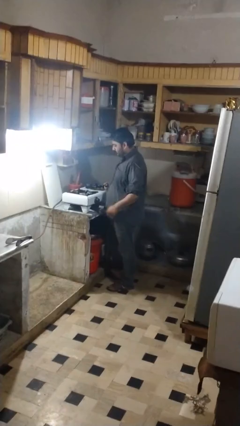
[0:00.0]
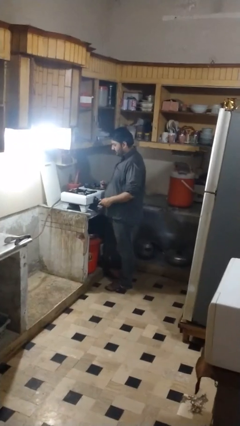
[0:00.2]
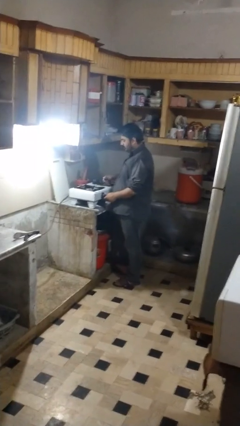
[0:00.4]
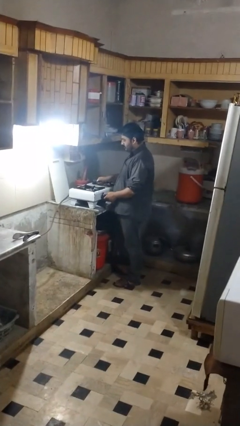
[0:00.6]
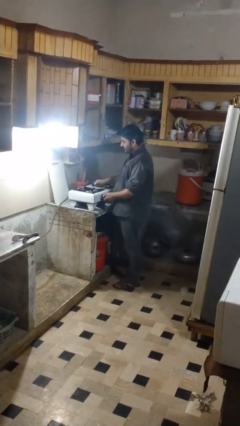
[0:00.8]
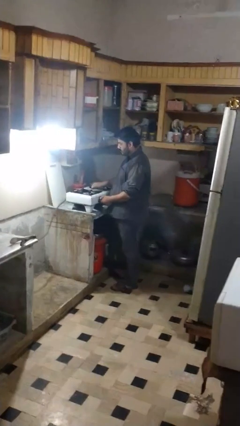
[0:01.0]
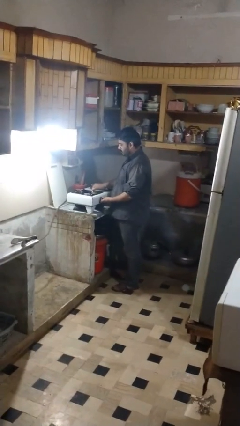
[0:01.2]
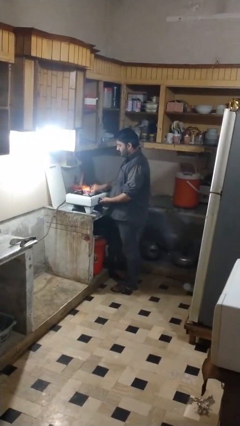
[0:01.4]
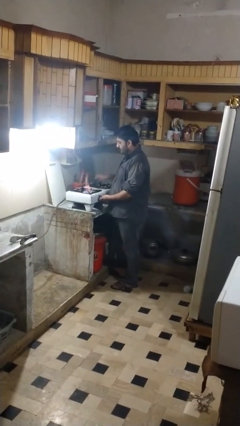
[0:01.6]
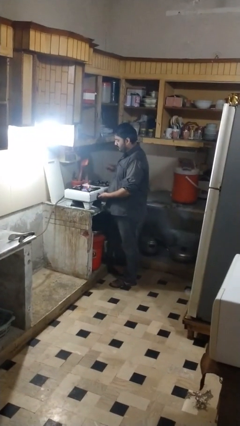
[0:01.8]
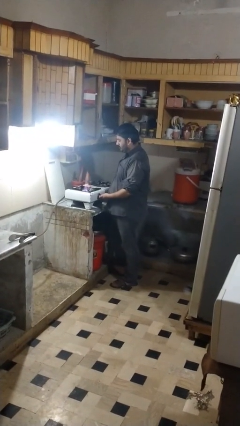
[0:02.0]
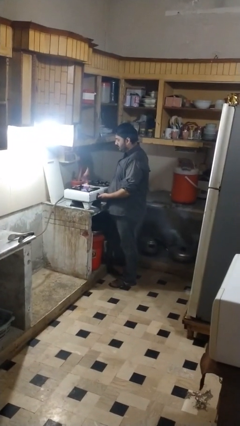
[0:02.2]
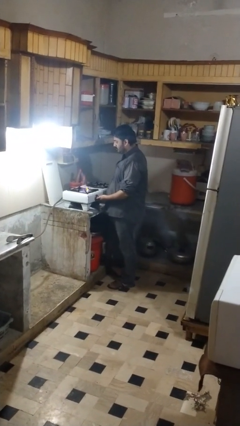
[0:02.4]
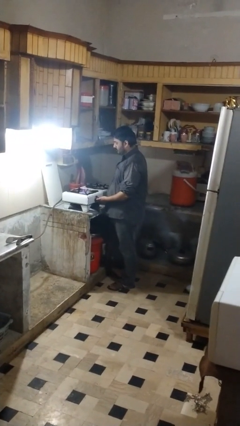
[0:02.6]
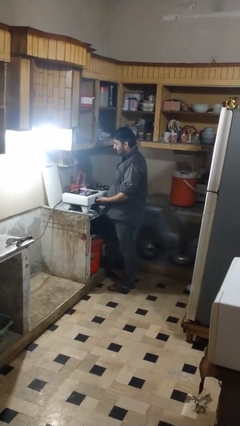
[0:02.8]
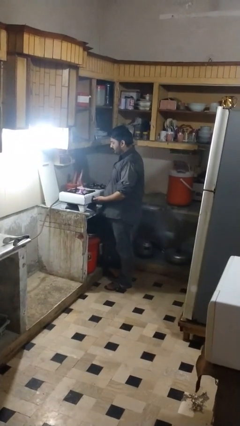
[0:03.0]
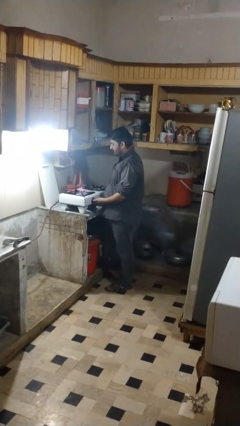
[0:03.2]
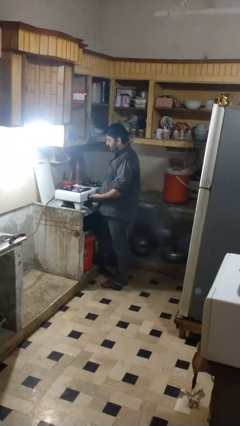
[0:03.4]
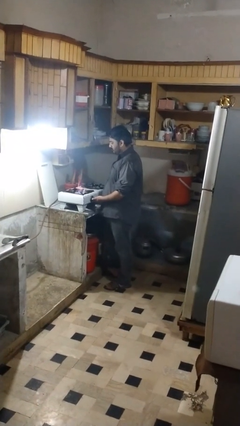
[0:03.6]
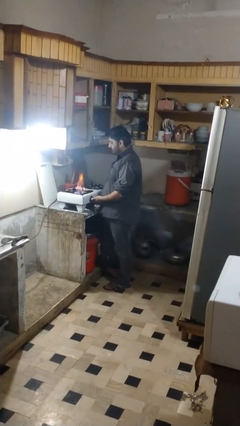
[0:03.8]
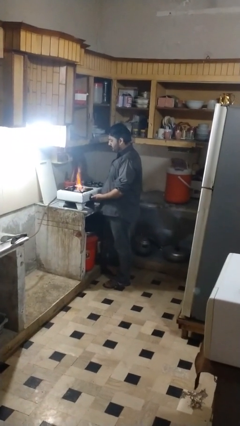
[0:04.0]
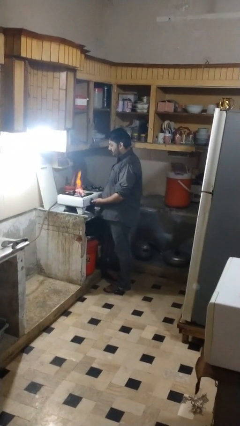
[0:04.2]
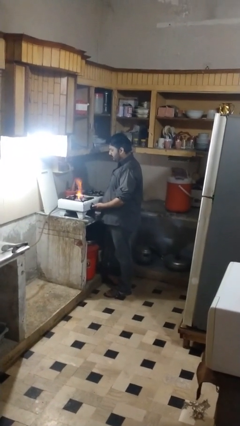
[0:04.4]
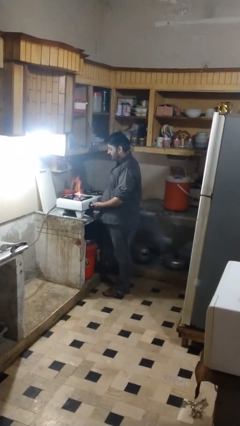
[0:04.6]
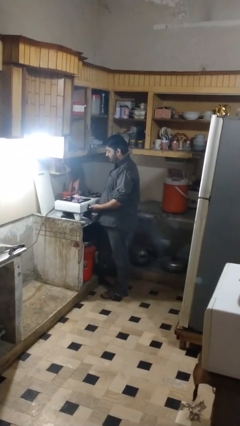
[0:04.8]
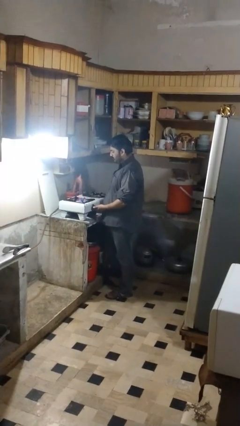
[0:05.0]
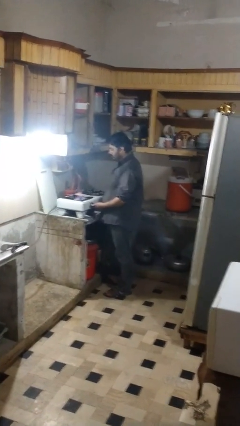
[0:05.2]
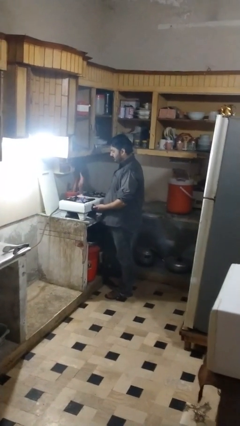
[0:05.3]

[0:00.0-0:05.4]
person turns on stovetop

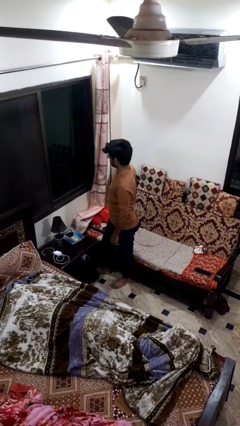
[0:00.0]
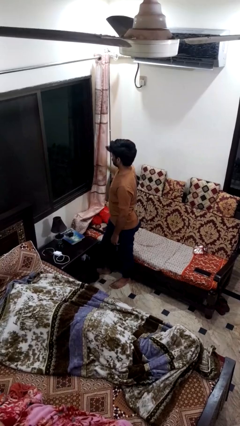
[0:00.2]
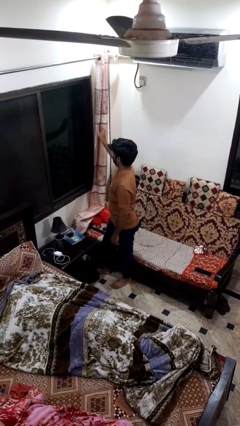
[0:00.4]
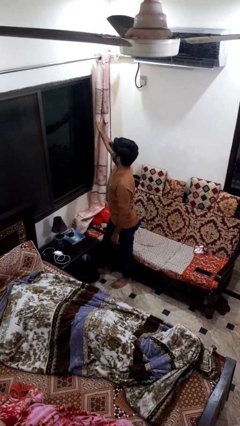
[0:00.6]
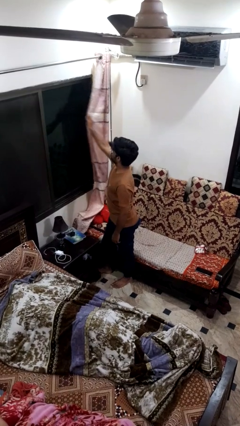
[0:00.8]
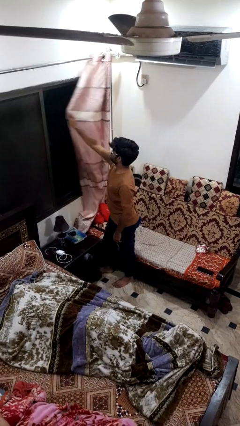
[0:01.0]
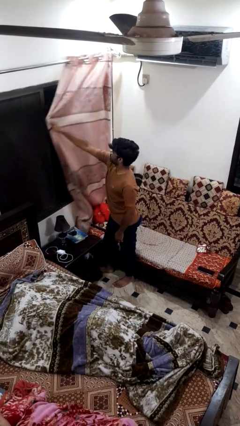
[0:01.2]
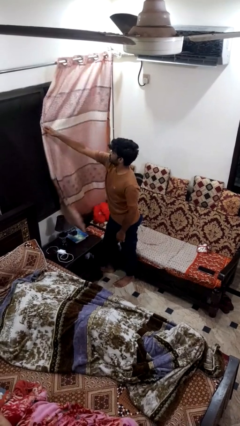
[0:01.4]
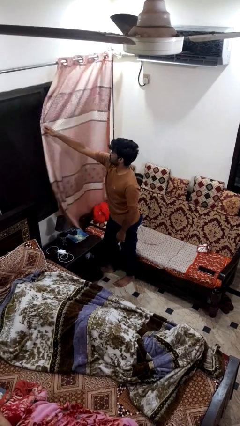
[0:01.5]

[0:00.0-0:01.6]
person closes curtains

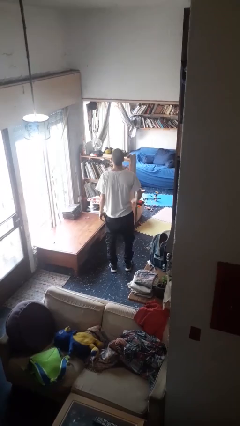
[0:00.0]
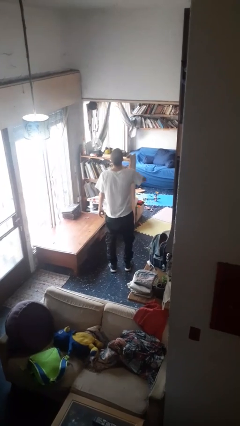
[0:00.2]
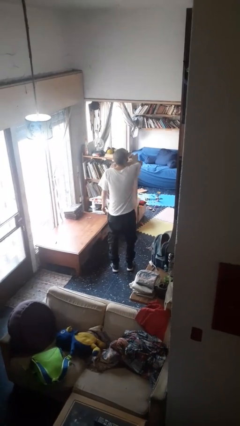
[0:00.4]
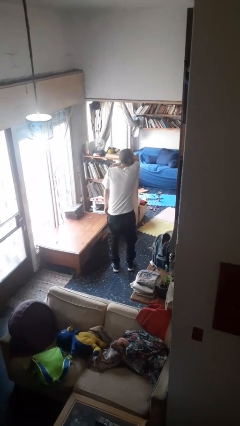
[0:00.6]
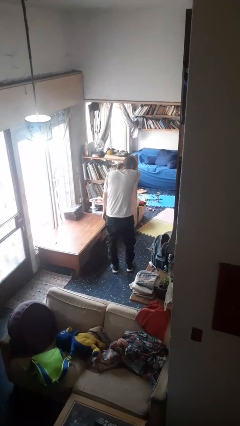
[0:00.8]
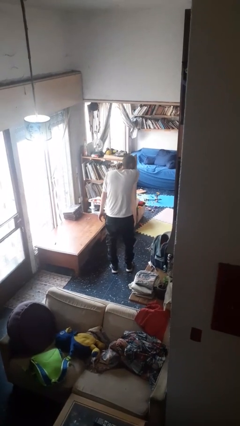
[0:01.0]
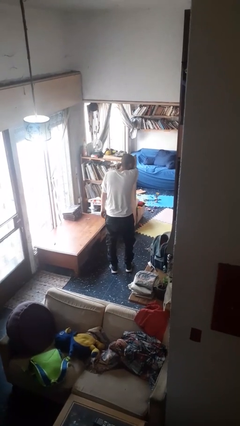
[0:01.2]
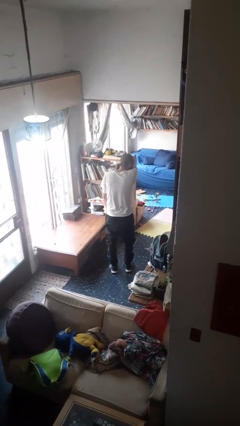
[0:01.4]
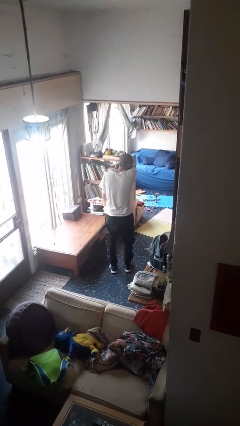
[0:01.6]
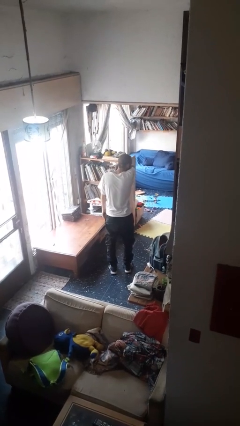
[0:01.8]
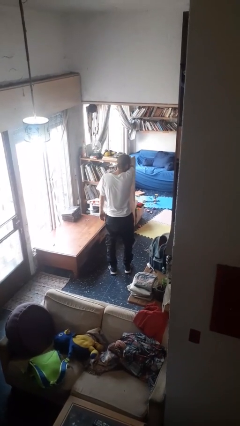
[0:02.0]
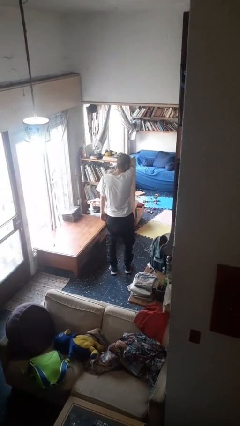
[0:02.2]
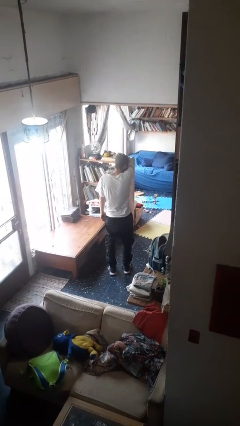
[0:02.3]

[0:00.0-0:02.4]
person sneezes into arm

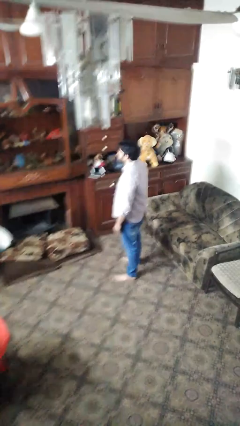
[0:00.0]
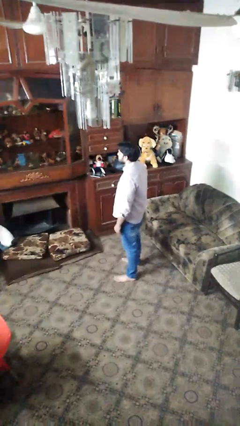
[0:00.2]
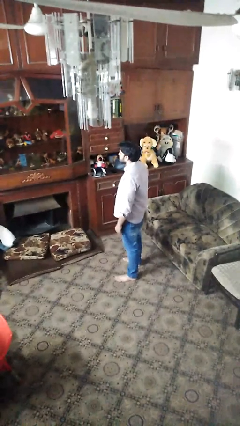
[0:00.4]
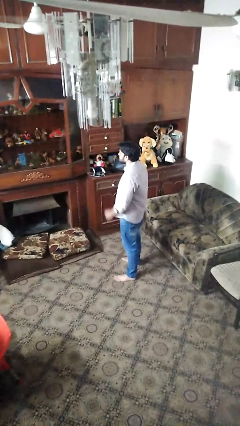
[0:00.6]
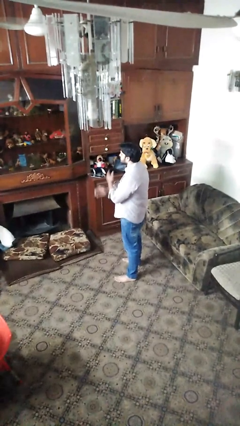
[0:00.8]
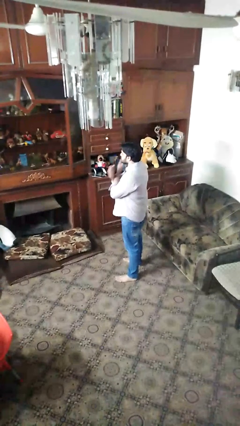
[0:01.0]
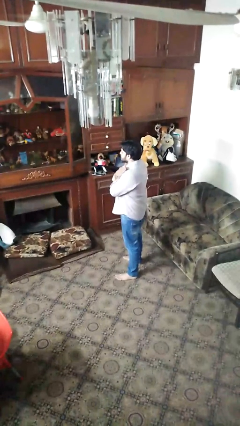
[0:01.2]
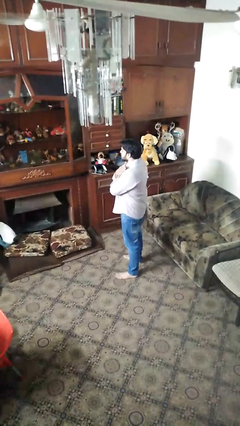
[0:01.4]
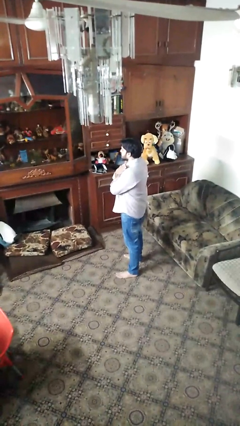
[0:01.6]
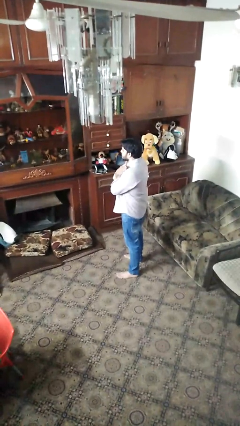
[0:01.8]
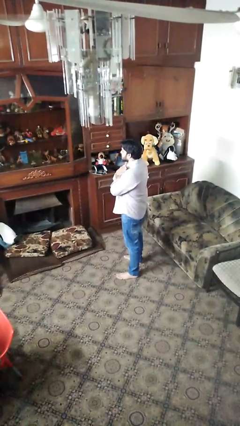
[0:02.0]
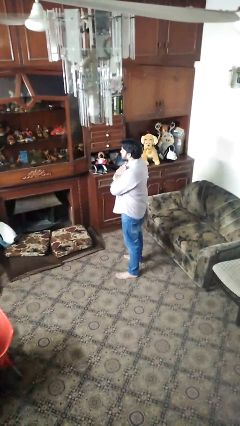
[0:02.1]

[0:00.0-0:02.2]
person gestures arms x

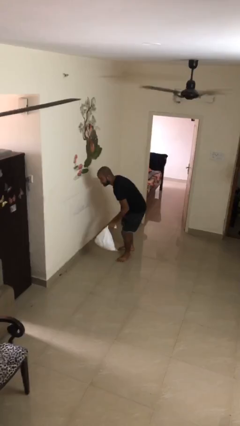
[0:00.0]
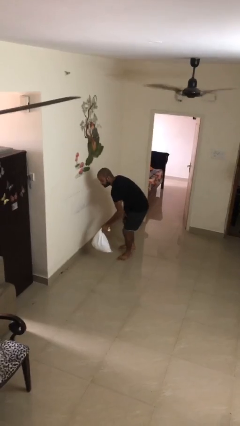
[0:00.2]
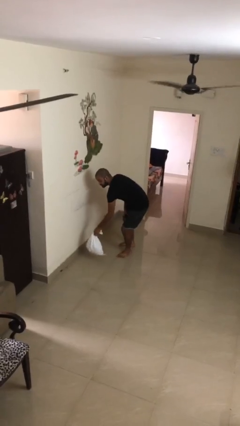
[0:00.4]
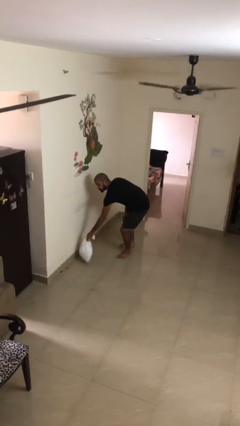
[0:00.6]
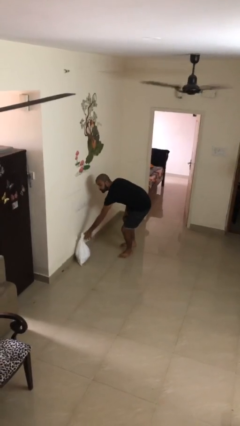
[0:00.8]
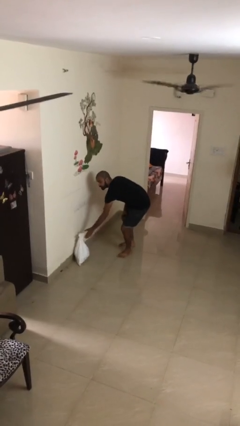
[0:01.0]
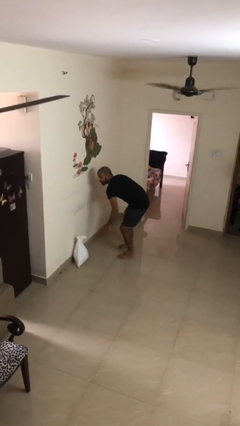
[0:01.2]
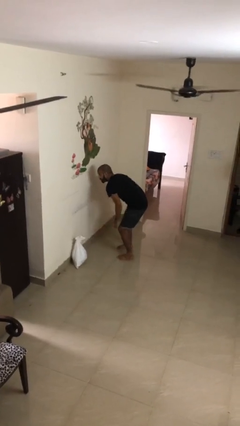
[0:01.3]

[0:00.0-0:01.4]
person puts down object on floor

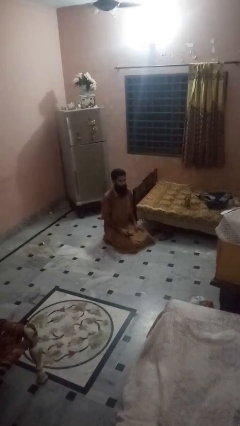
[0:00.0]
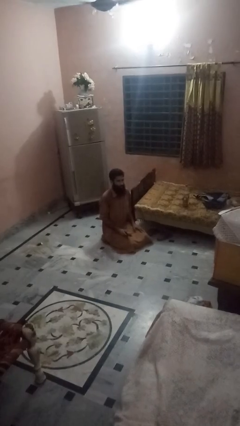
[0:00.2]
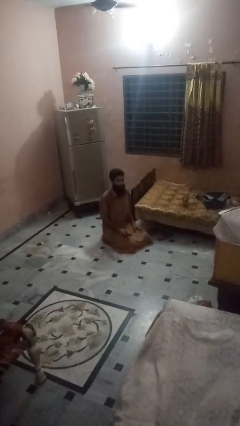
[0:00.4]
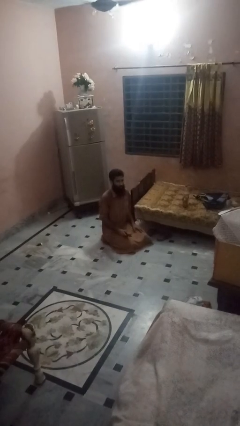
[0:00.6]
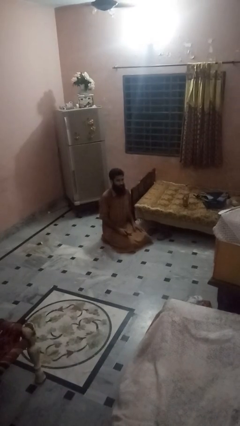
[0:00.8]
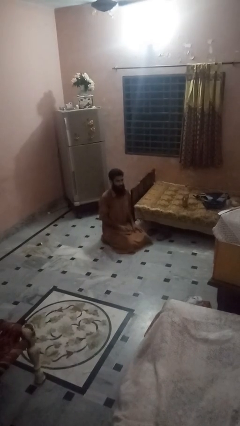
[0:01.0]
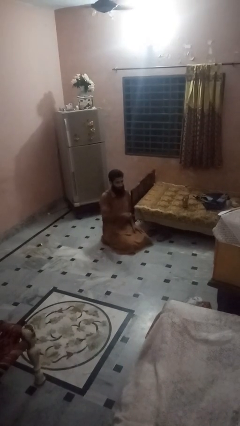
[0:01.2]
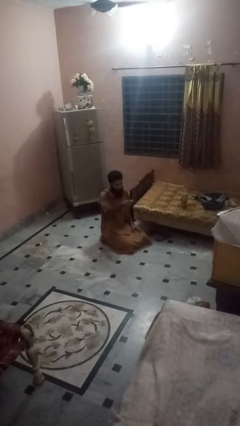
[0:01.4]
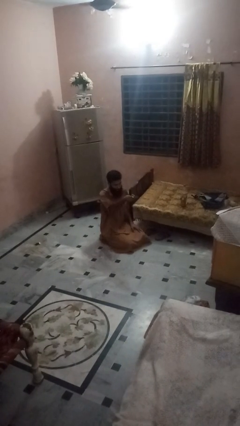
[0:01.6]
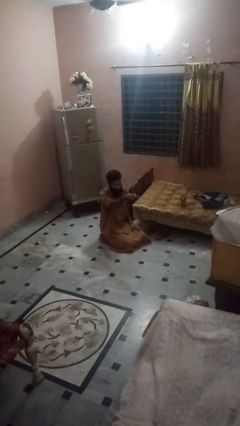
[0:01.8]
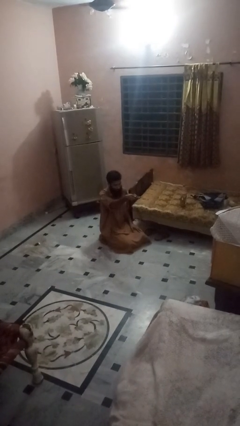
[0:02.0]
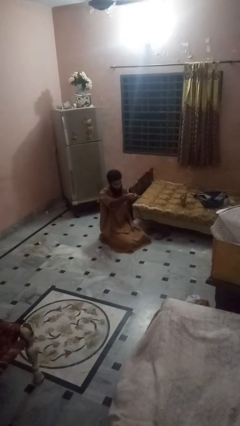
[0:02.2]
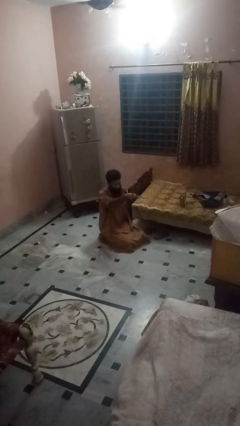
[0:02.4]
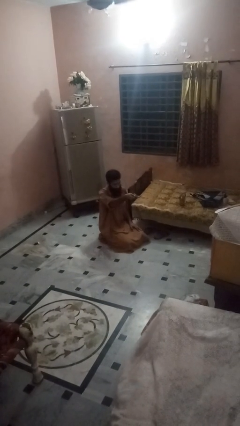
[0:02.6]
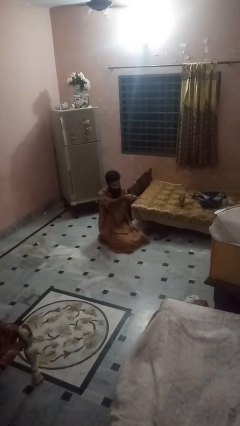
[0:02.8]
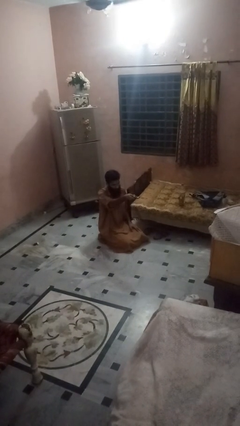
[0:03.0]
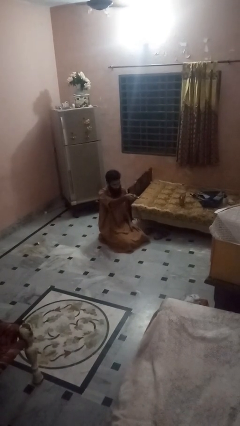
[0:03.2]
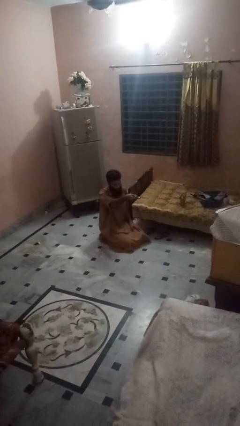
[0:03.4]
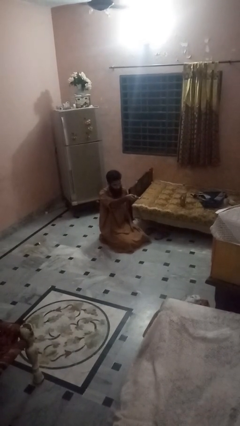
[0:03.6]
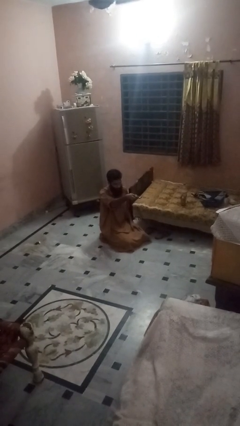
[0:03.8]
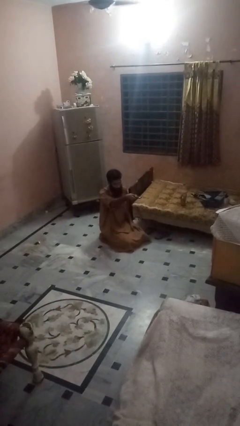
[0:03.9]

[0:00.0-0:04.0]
person uses television remote

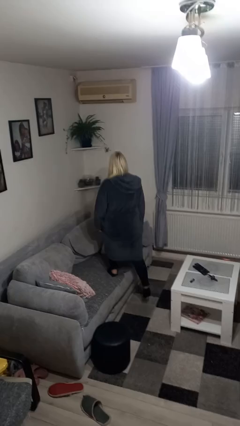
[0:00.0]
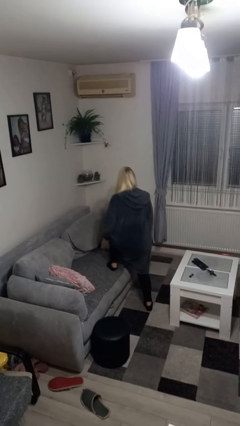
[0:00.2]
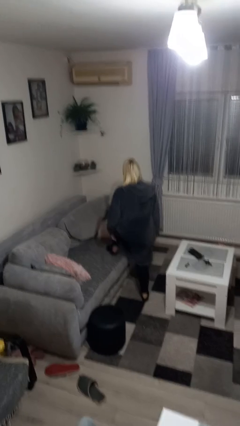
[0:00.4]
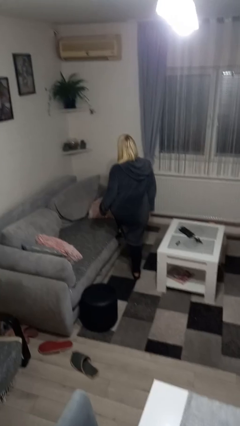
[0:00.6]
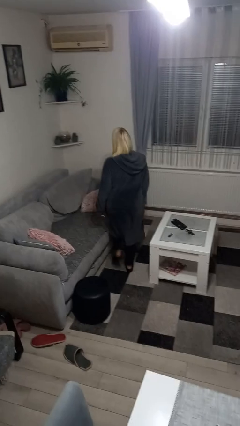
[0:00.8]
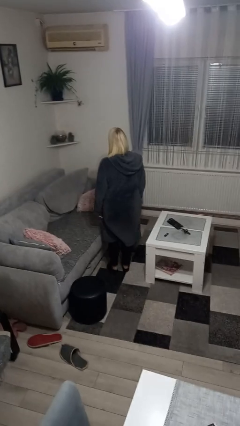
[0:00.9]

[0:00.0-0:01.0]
person climbs off couch
